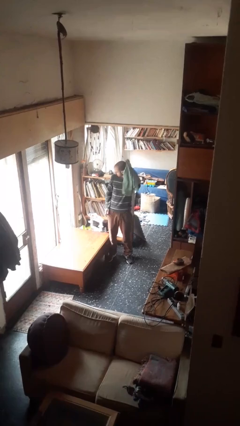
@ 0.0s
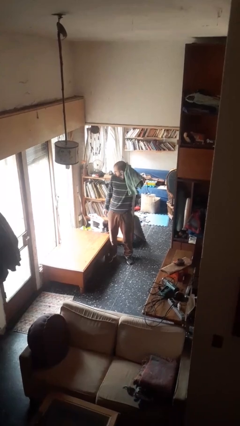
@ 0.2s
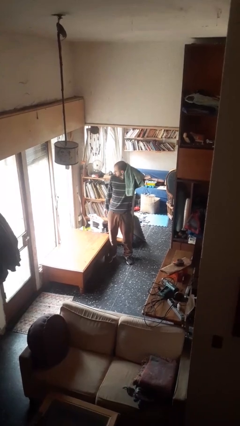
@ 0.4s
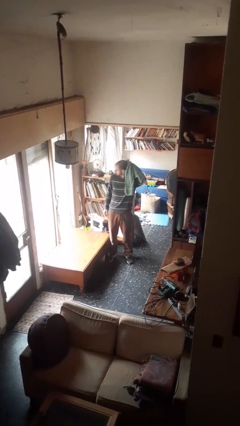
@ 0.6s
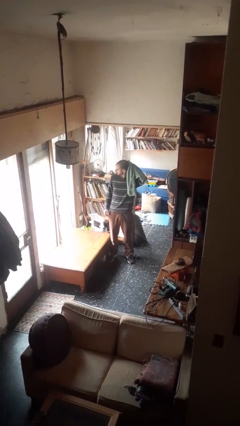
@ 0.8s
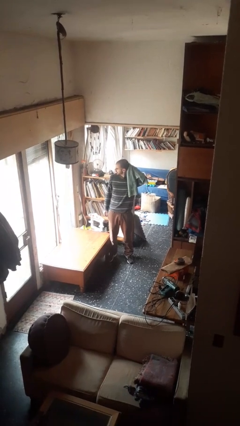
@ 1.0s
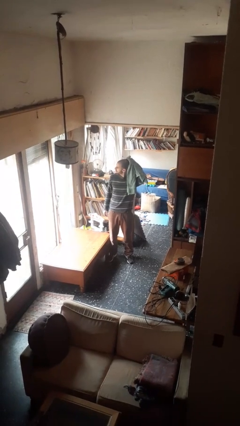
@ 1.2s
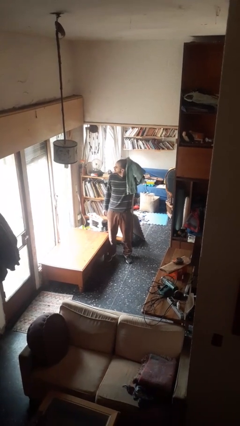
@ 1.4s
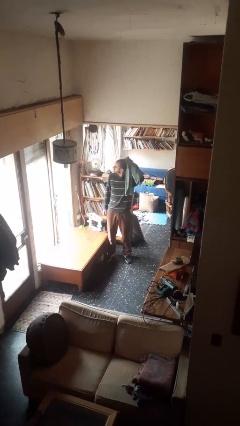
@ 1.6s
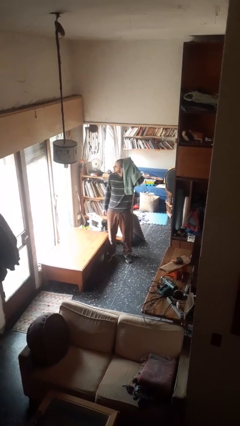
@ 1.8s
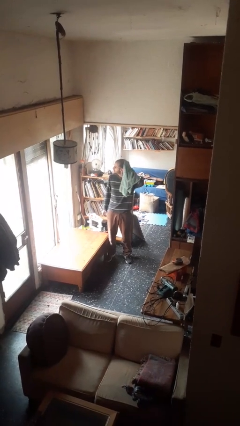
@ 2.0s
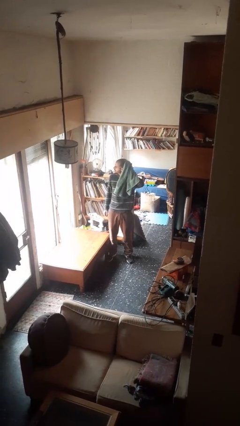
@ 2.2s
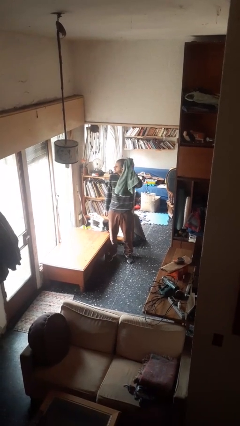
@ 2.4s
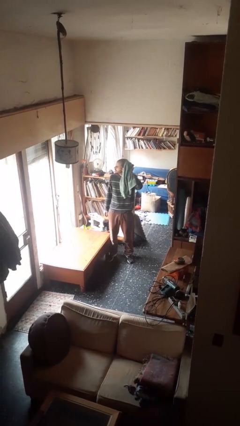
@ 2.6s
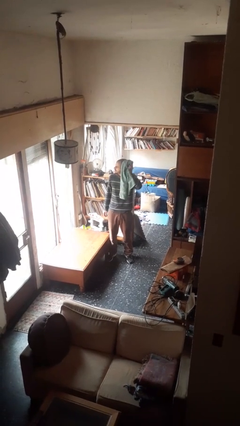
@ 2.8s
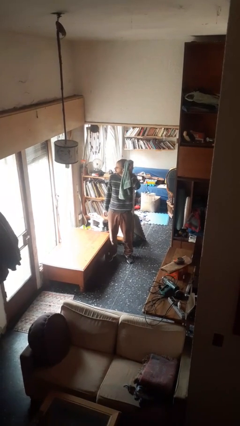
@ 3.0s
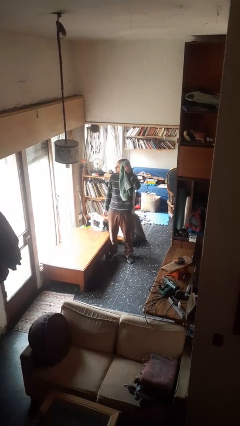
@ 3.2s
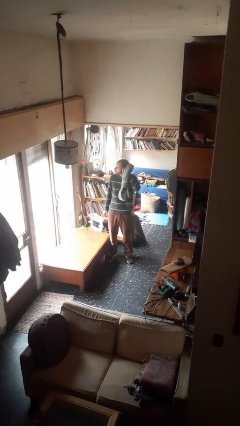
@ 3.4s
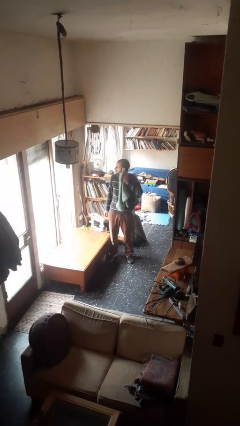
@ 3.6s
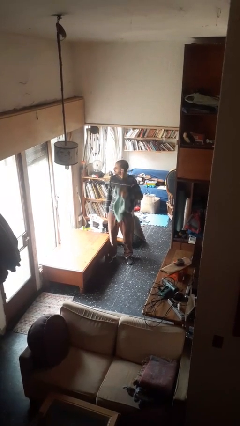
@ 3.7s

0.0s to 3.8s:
person dries hair with towel

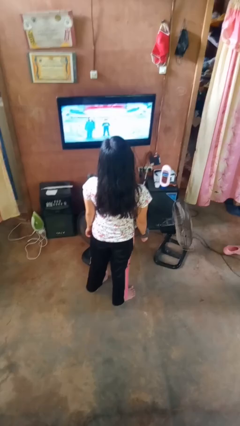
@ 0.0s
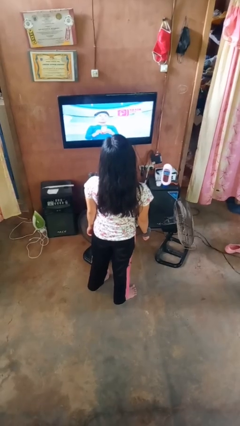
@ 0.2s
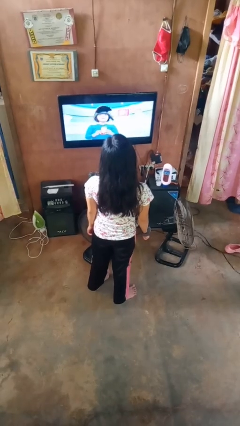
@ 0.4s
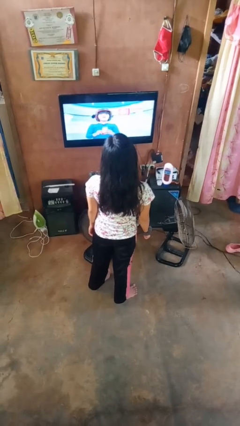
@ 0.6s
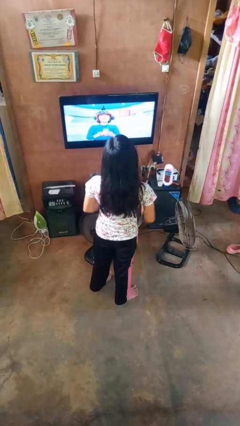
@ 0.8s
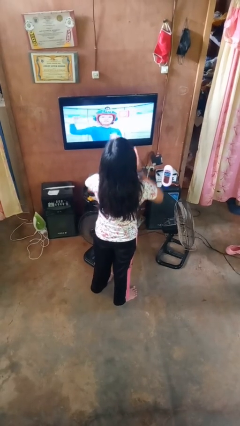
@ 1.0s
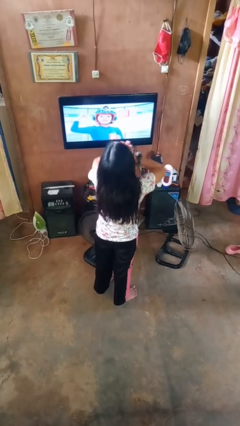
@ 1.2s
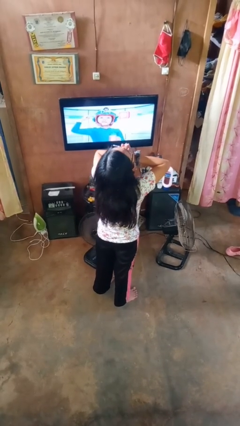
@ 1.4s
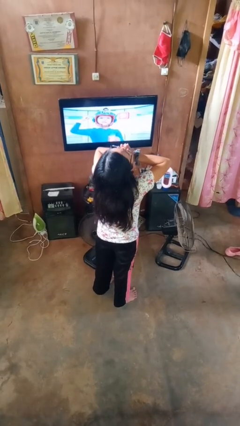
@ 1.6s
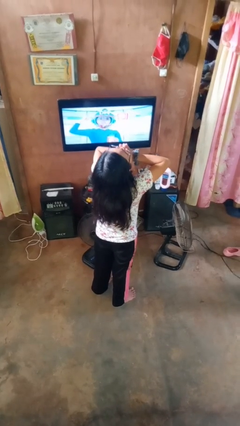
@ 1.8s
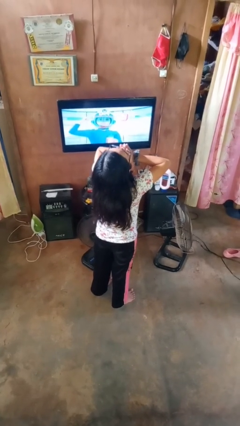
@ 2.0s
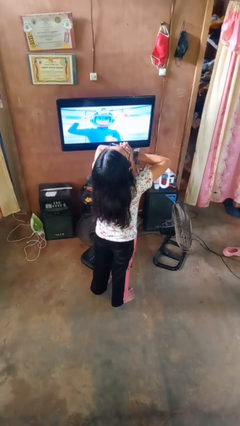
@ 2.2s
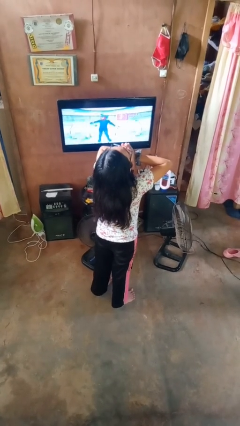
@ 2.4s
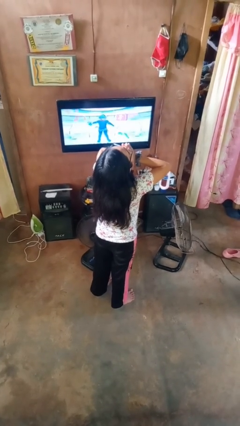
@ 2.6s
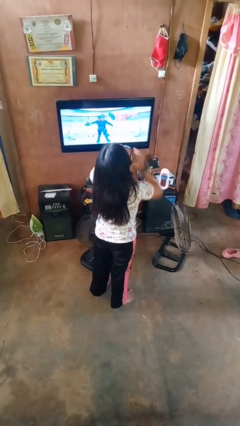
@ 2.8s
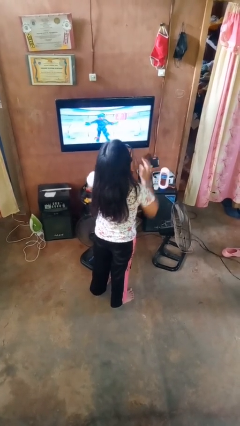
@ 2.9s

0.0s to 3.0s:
person yawns

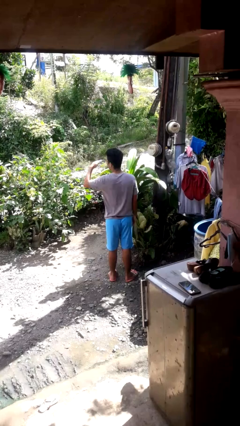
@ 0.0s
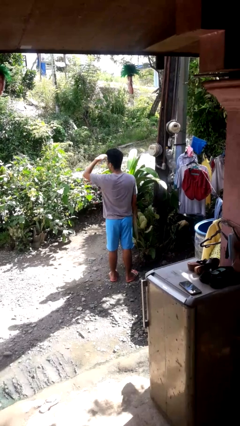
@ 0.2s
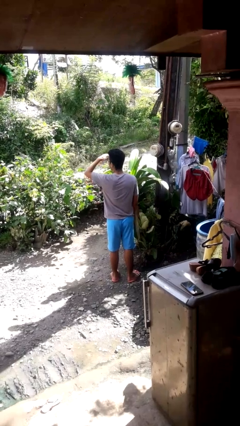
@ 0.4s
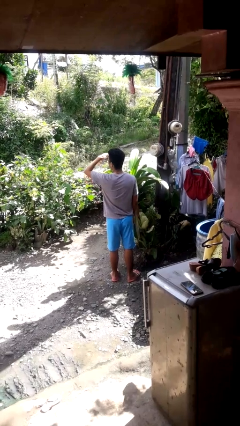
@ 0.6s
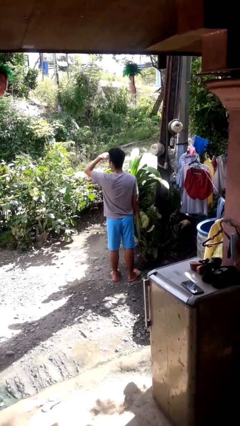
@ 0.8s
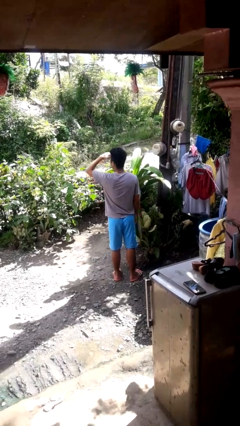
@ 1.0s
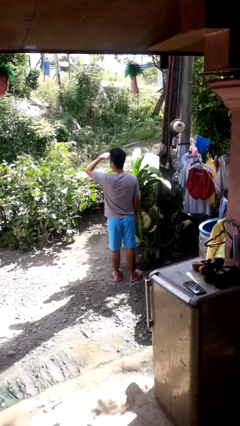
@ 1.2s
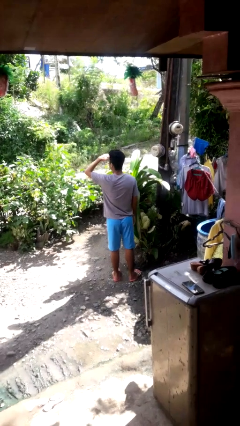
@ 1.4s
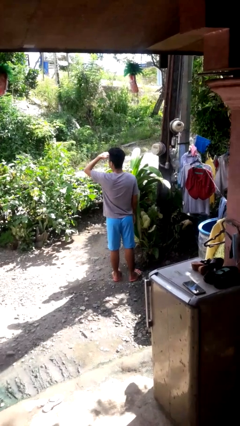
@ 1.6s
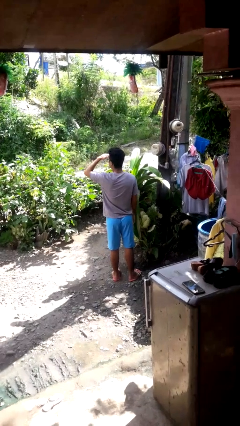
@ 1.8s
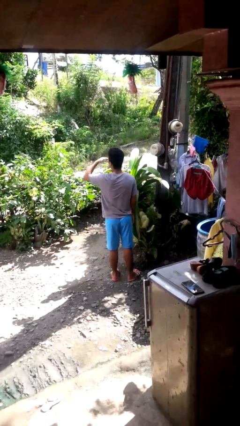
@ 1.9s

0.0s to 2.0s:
person shades eyes

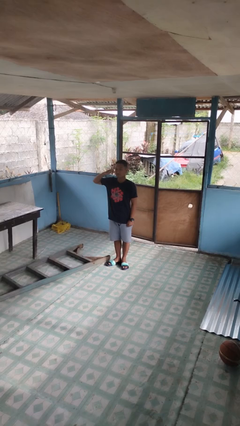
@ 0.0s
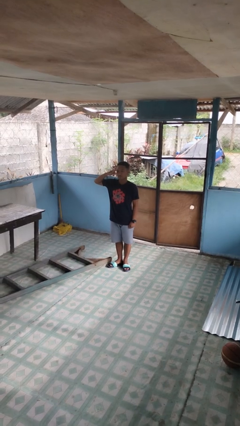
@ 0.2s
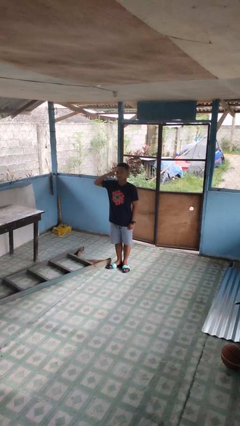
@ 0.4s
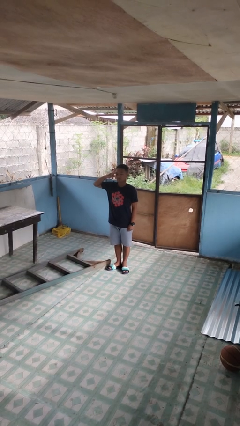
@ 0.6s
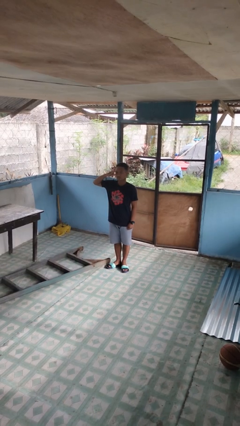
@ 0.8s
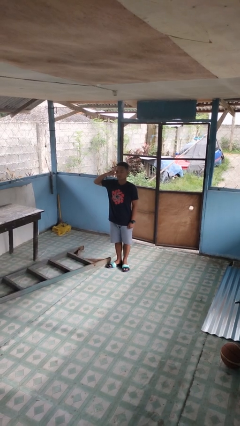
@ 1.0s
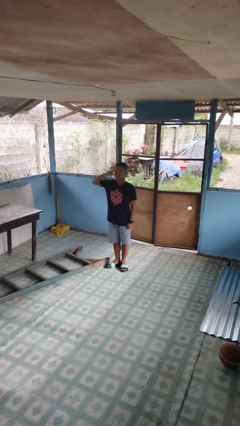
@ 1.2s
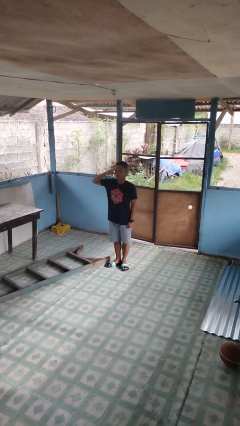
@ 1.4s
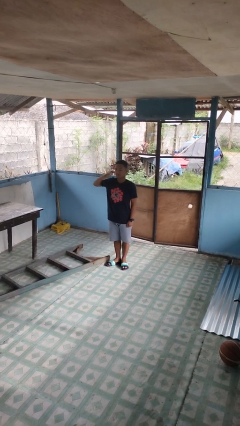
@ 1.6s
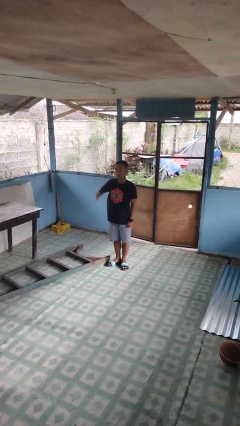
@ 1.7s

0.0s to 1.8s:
person salutes

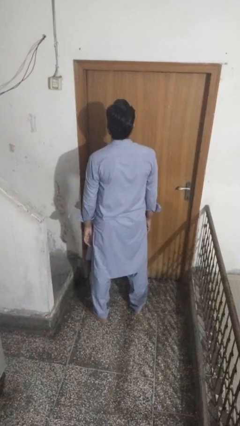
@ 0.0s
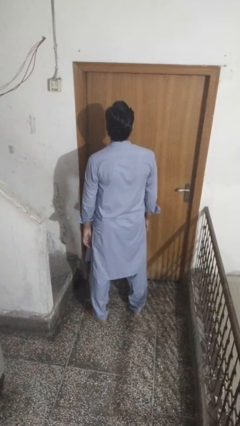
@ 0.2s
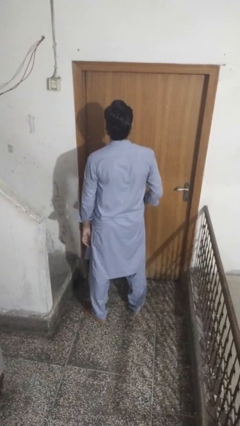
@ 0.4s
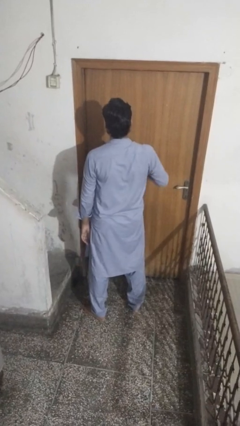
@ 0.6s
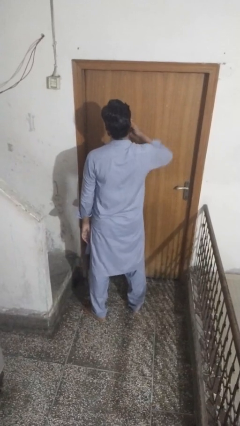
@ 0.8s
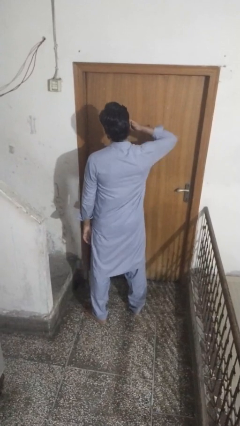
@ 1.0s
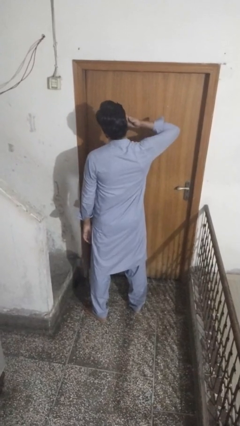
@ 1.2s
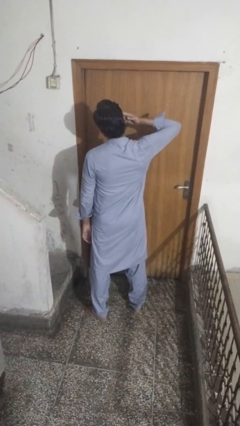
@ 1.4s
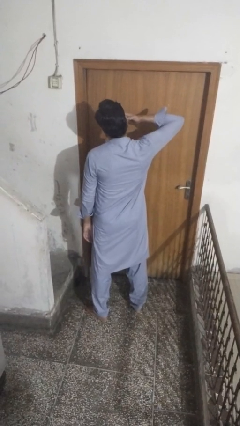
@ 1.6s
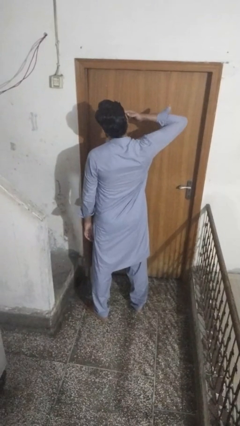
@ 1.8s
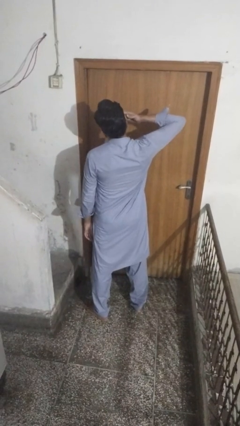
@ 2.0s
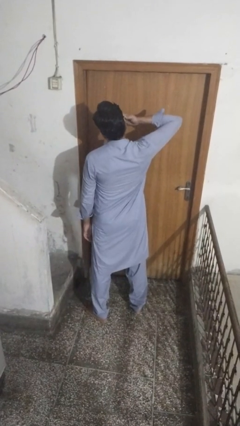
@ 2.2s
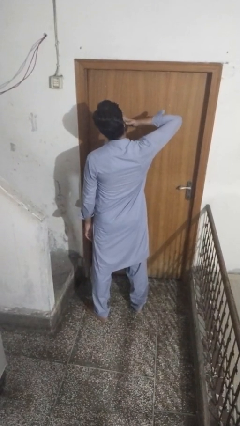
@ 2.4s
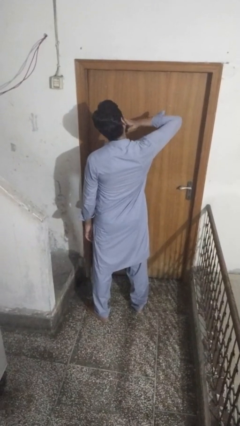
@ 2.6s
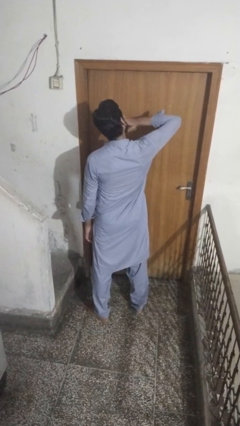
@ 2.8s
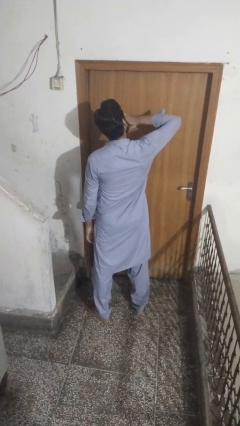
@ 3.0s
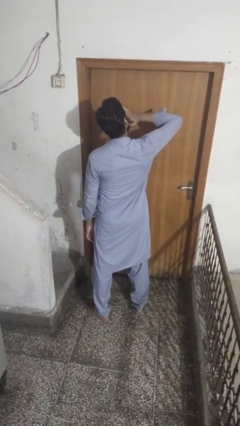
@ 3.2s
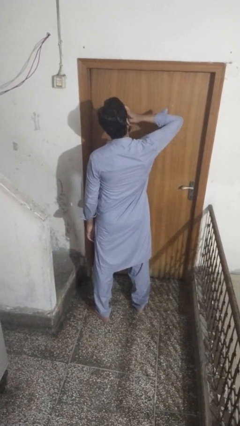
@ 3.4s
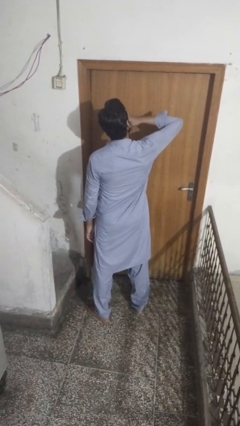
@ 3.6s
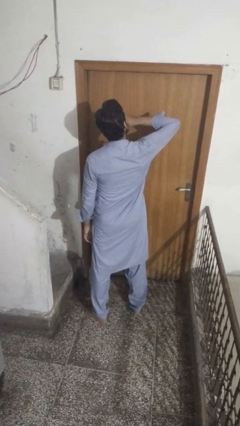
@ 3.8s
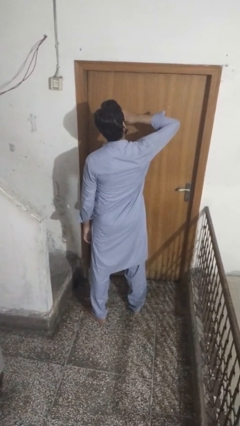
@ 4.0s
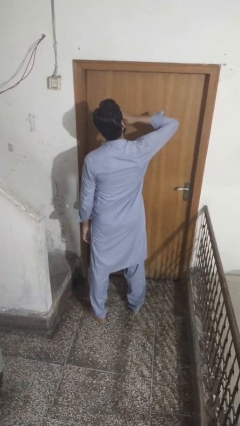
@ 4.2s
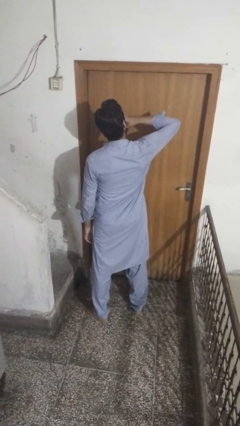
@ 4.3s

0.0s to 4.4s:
person rubs eyes

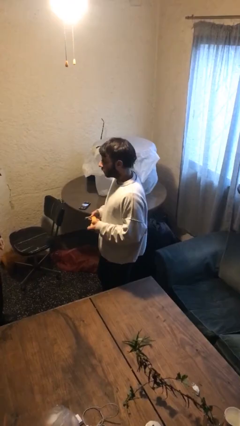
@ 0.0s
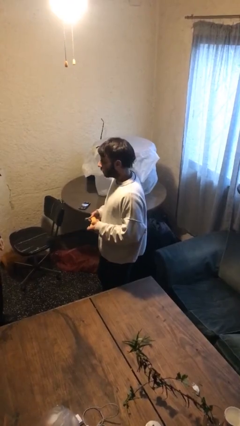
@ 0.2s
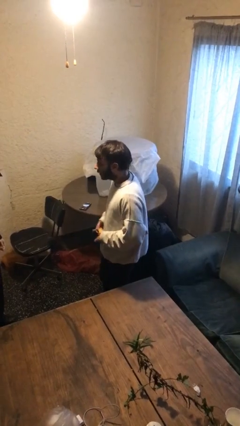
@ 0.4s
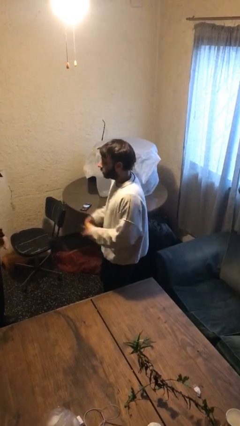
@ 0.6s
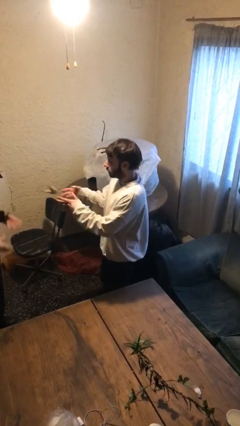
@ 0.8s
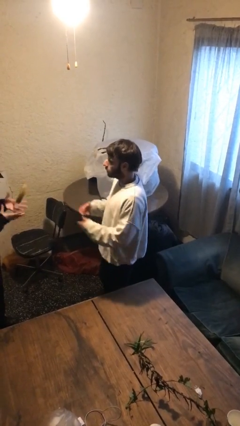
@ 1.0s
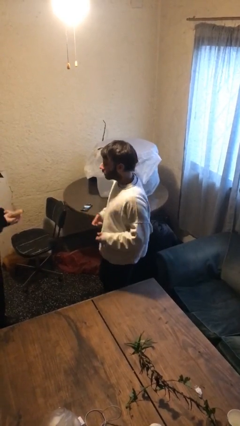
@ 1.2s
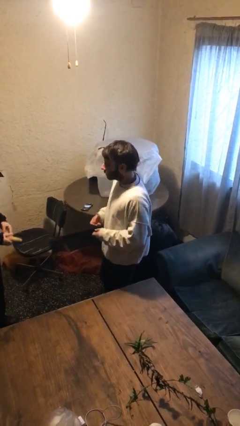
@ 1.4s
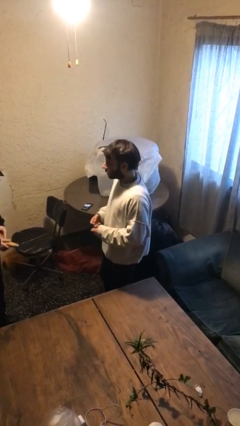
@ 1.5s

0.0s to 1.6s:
person throws object to person

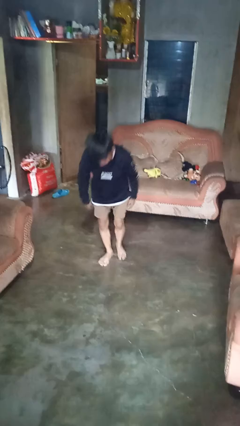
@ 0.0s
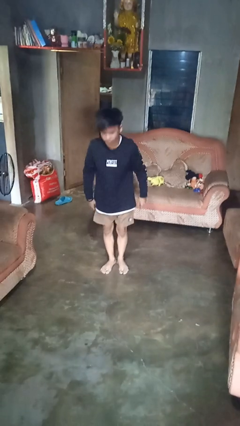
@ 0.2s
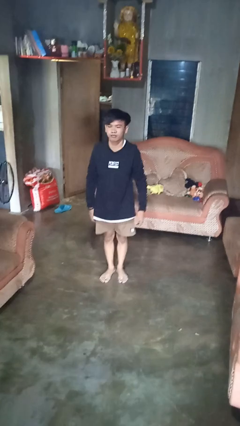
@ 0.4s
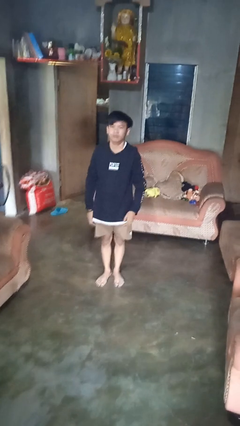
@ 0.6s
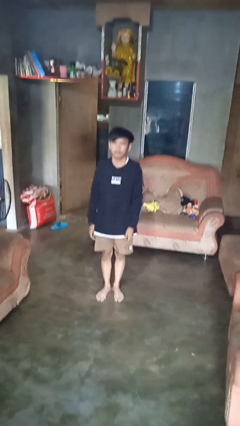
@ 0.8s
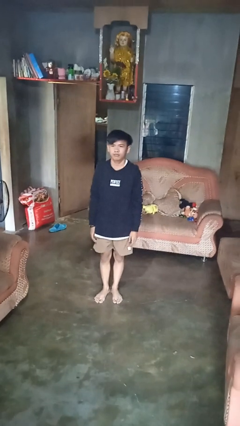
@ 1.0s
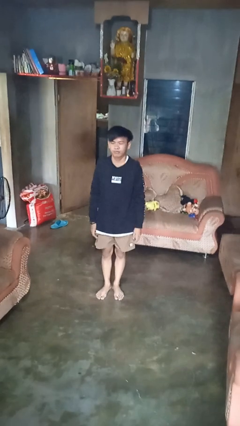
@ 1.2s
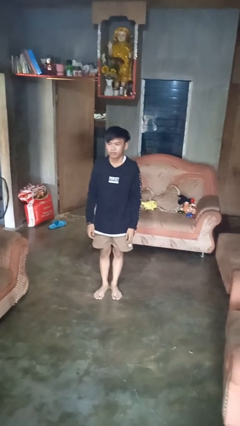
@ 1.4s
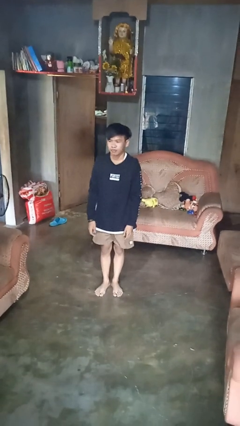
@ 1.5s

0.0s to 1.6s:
person stands up from floor
